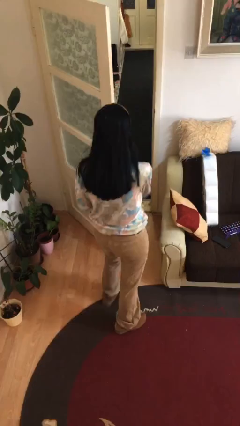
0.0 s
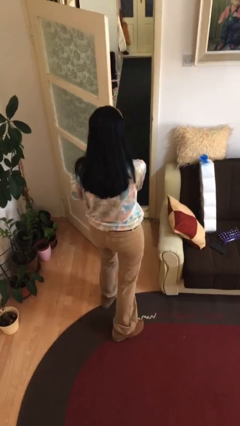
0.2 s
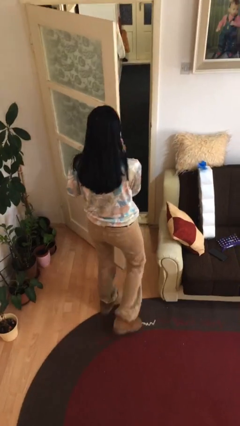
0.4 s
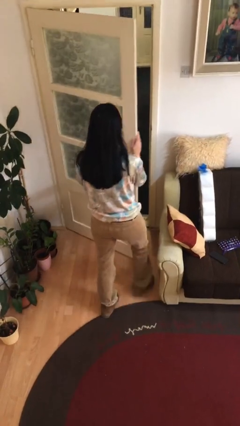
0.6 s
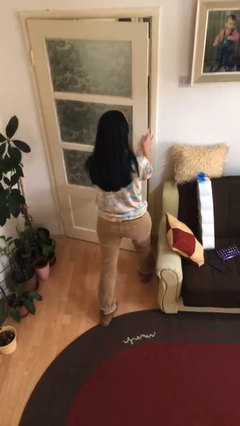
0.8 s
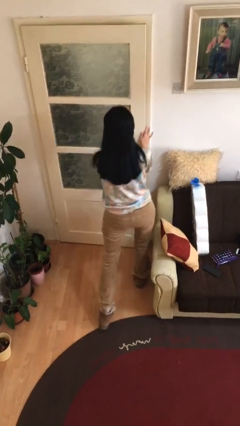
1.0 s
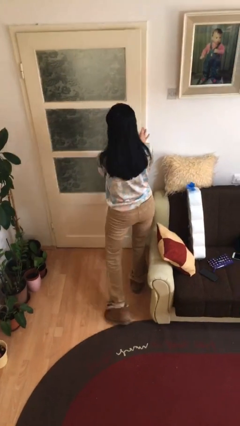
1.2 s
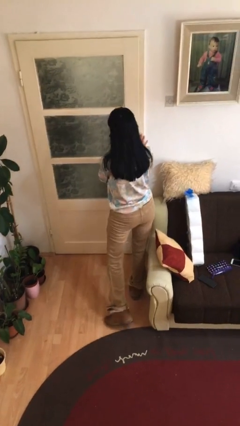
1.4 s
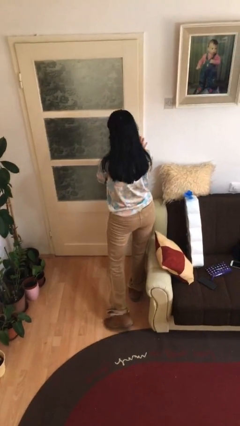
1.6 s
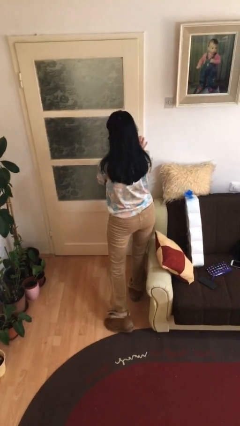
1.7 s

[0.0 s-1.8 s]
person closes facility door

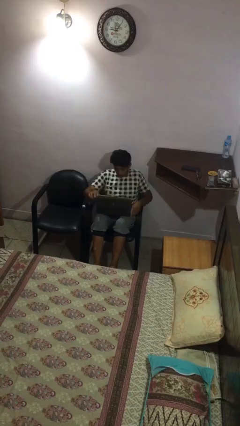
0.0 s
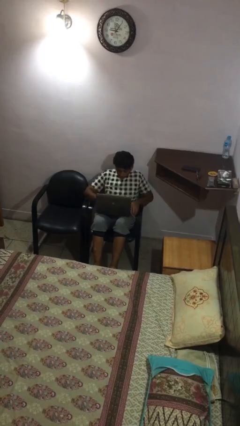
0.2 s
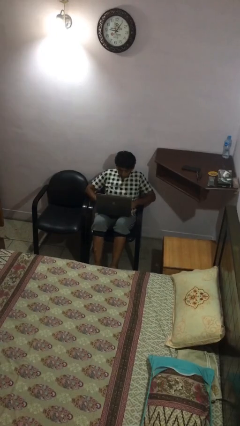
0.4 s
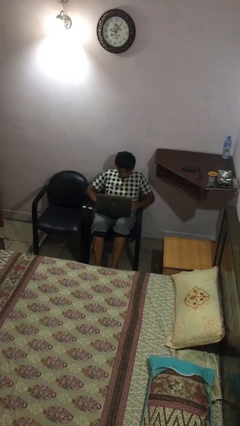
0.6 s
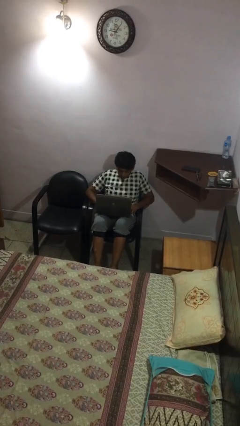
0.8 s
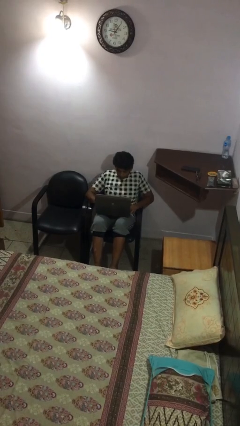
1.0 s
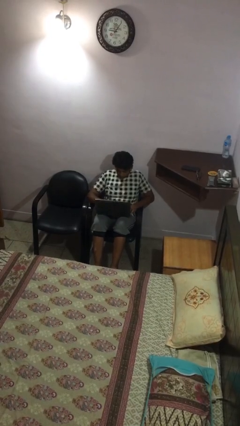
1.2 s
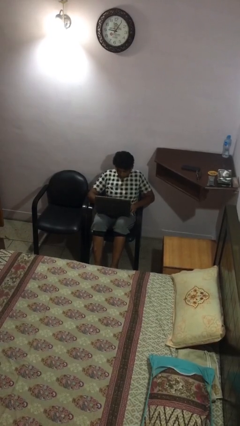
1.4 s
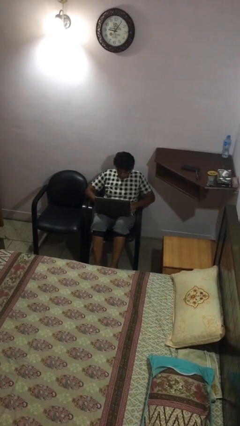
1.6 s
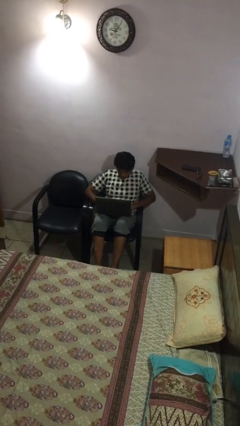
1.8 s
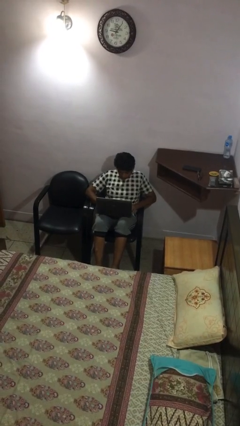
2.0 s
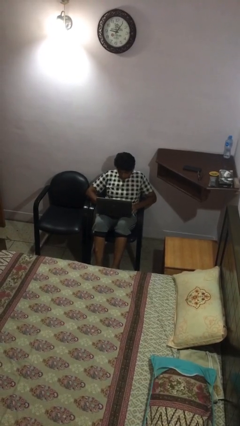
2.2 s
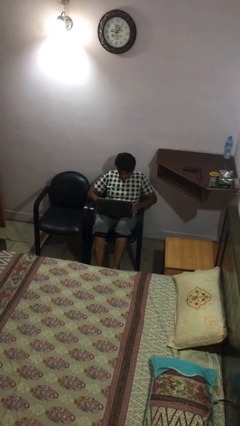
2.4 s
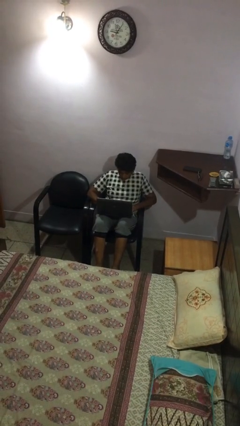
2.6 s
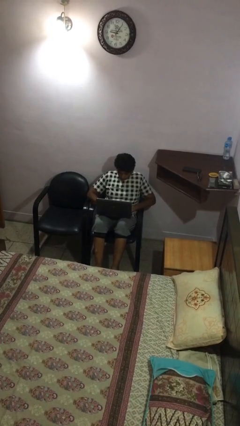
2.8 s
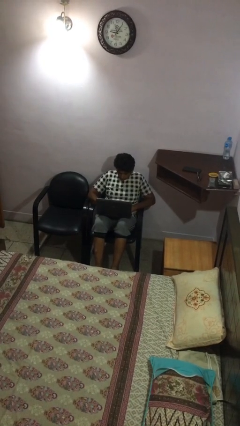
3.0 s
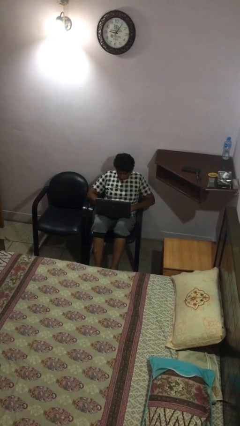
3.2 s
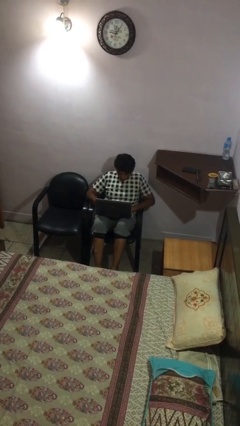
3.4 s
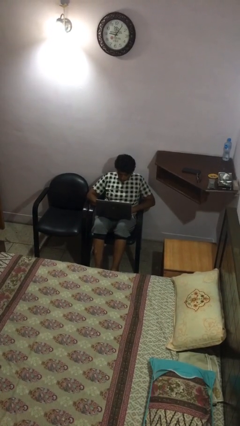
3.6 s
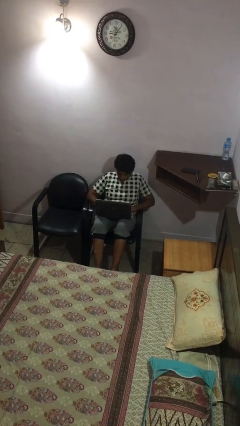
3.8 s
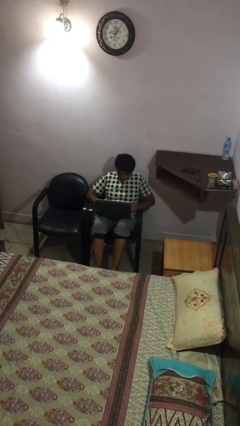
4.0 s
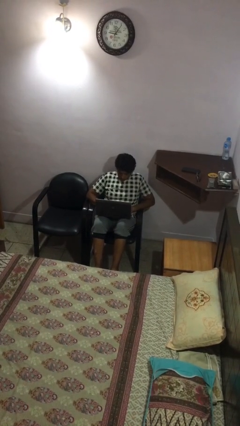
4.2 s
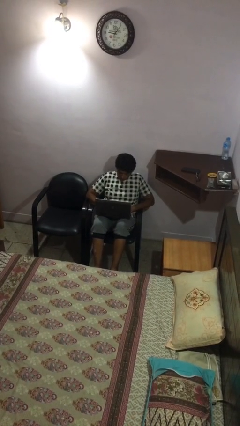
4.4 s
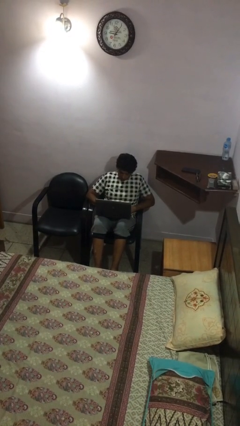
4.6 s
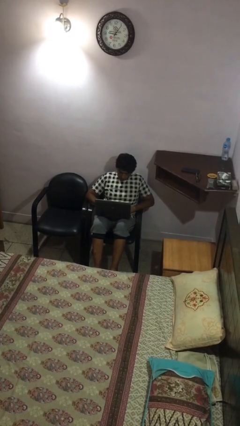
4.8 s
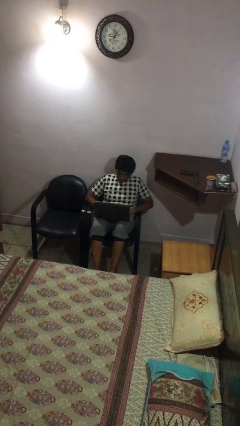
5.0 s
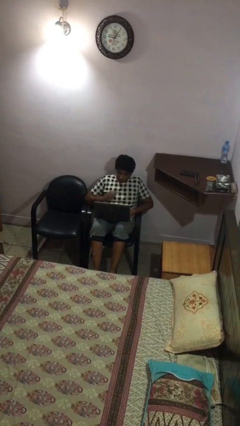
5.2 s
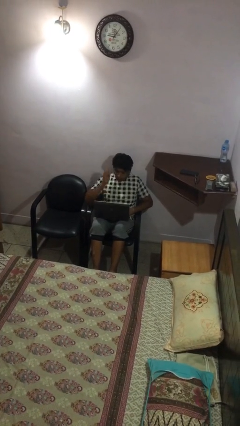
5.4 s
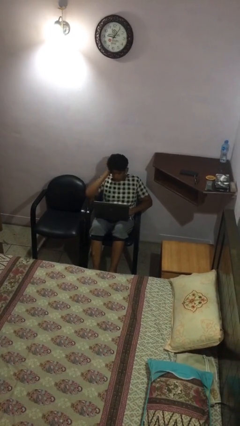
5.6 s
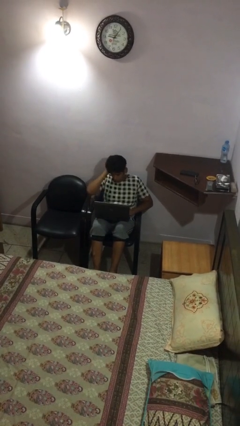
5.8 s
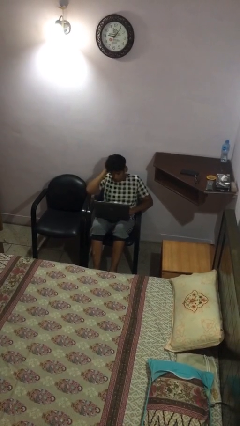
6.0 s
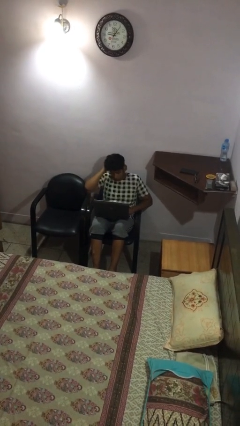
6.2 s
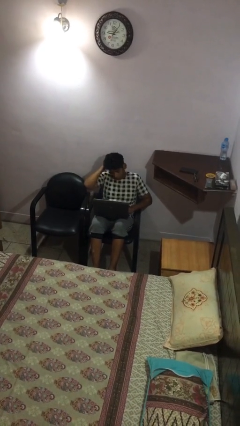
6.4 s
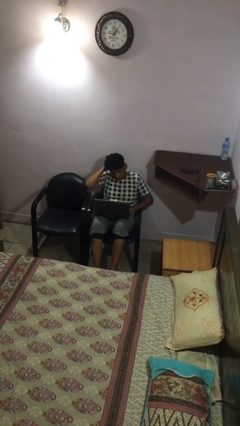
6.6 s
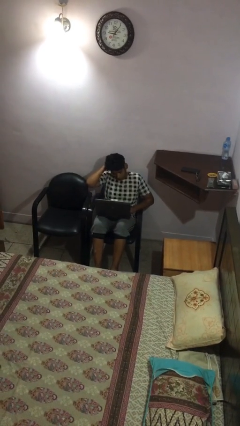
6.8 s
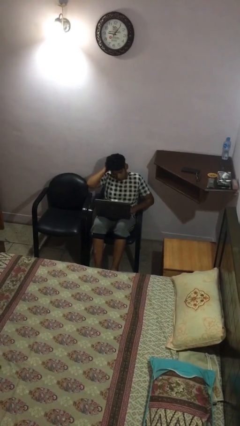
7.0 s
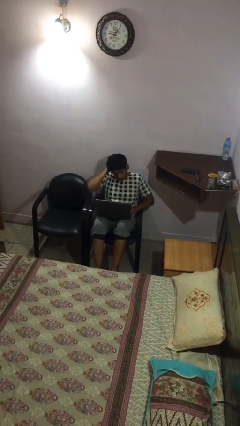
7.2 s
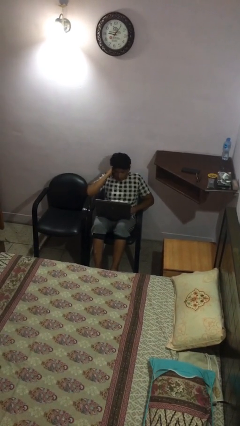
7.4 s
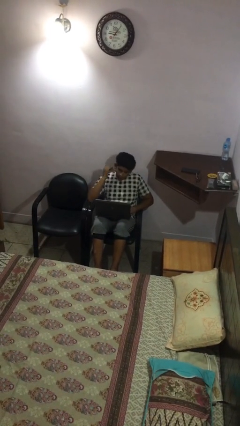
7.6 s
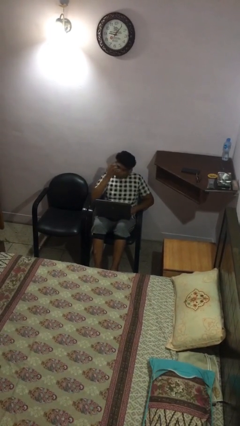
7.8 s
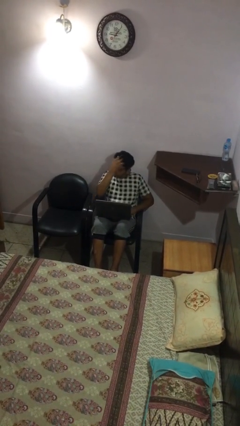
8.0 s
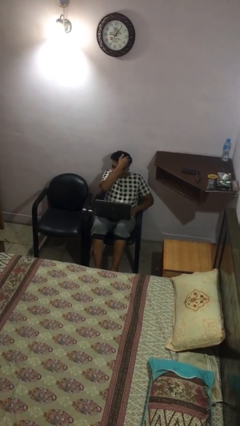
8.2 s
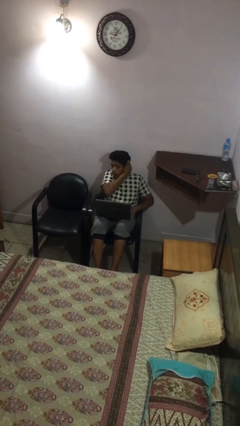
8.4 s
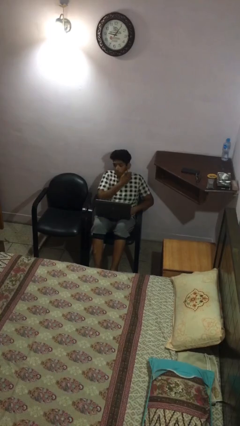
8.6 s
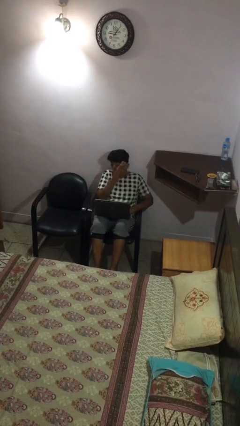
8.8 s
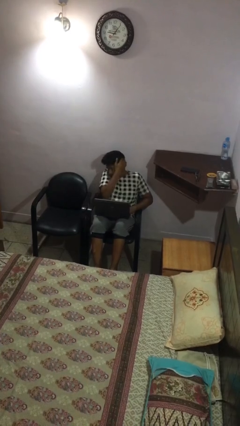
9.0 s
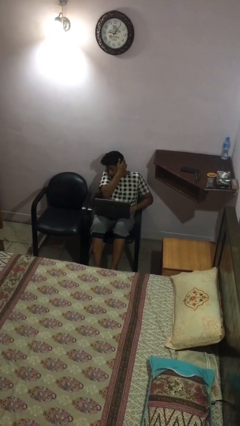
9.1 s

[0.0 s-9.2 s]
person interacts with laptop

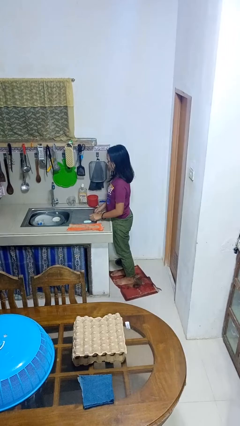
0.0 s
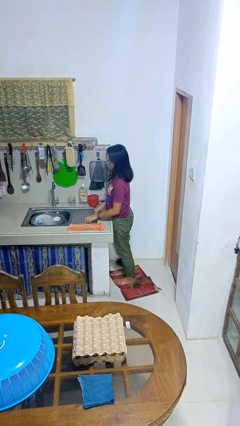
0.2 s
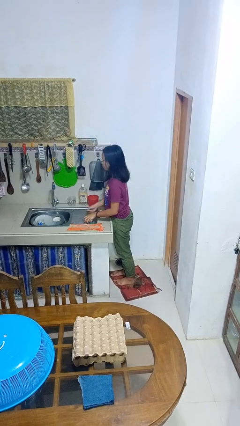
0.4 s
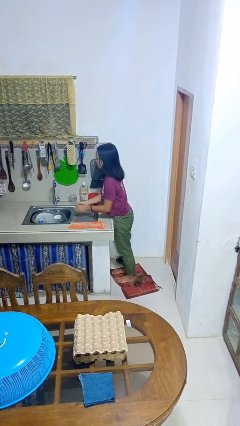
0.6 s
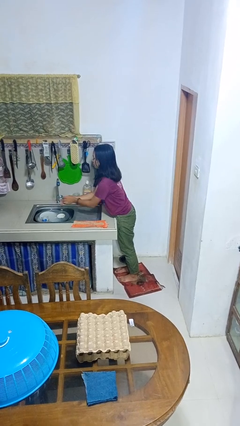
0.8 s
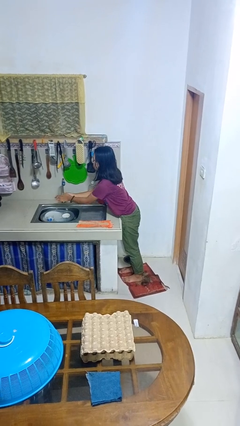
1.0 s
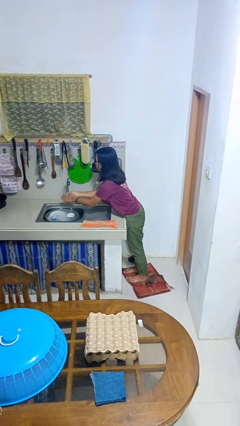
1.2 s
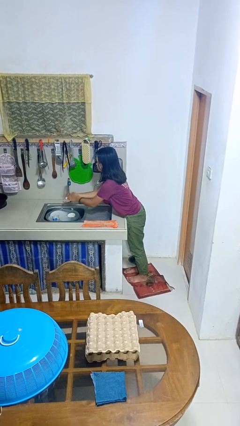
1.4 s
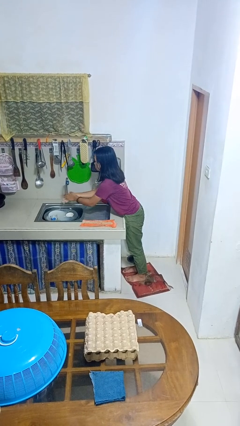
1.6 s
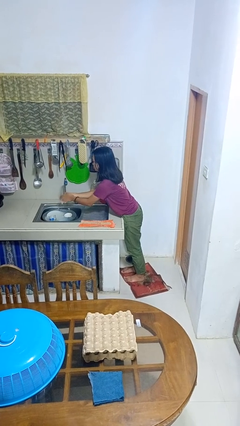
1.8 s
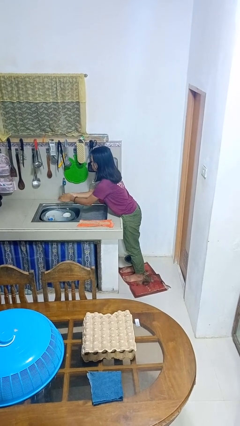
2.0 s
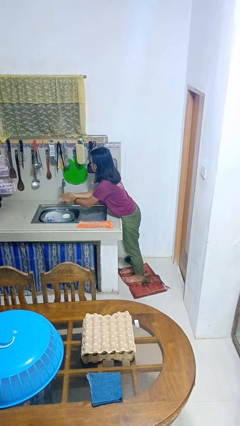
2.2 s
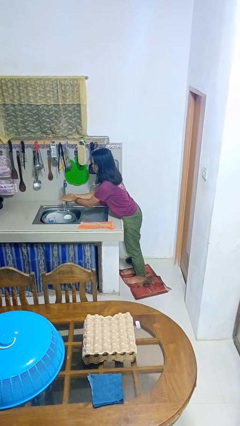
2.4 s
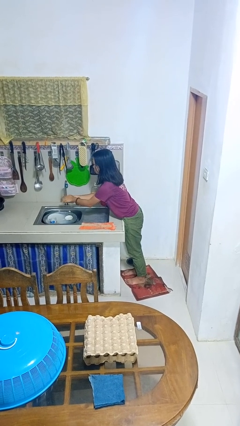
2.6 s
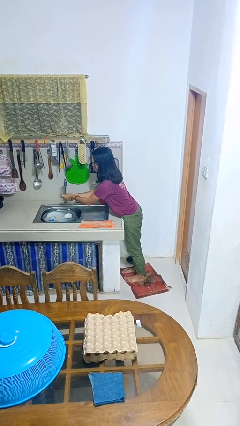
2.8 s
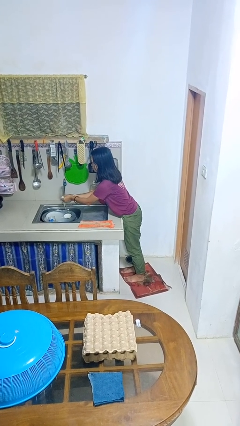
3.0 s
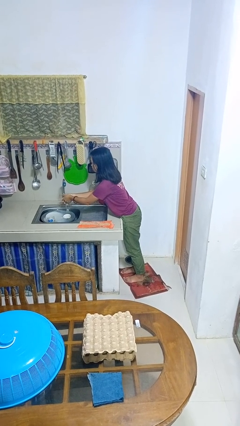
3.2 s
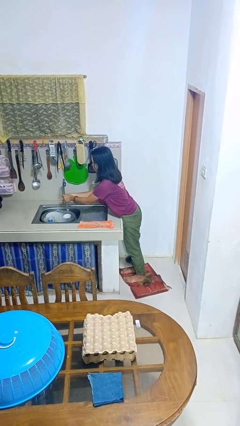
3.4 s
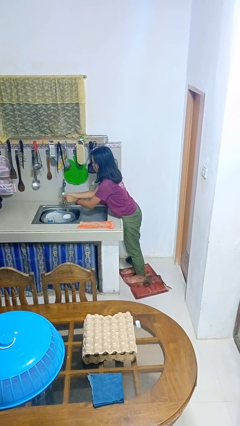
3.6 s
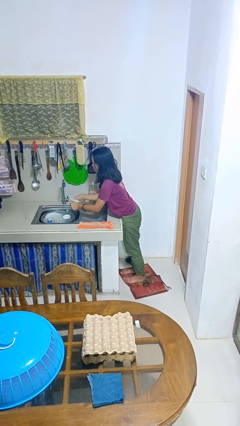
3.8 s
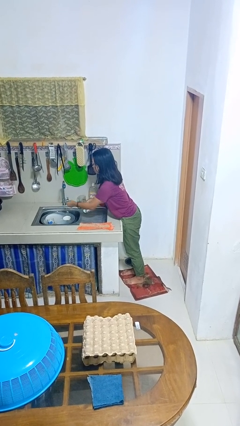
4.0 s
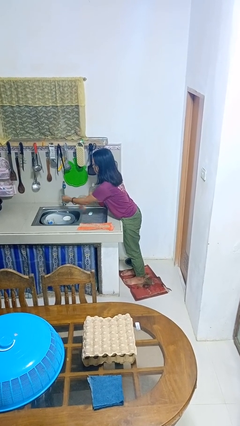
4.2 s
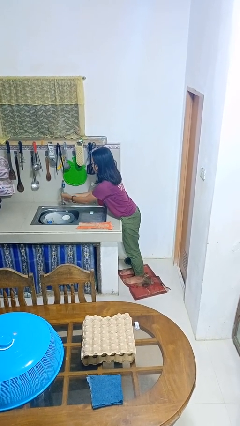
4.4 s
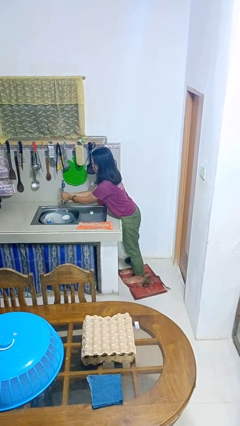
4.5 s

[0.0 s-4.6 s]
person washes hands

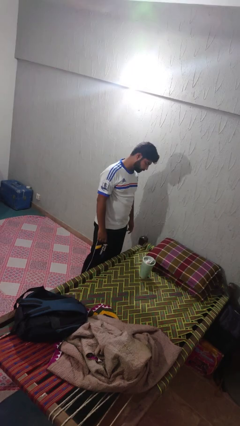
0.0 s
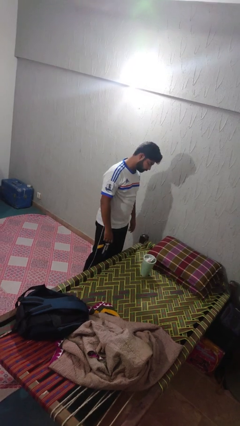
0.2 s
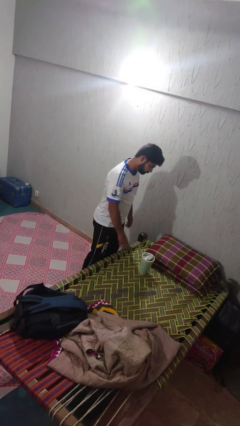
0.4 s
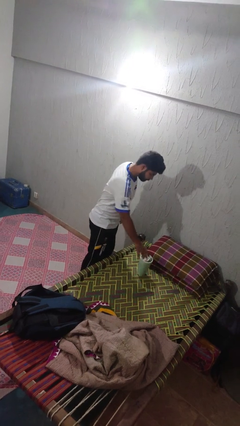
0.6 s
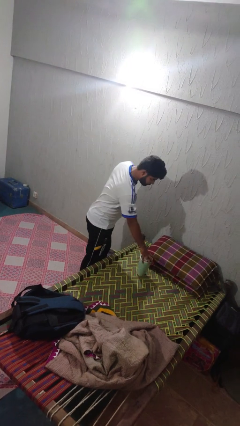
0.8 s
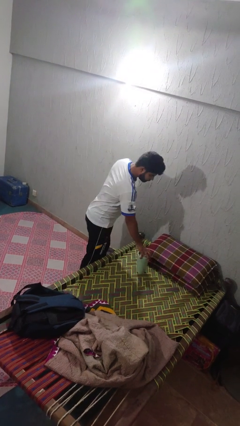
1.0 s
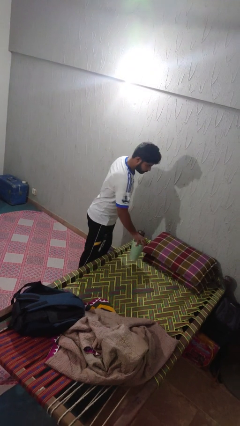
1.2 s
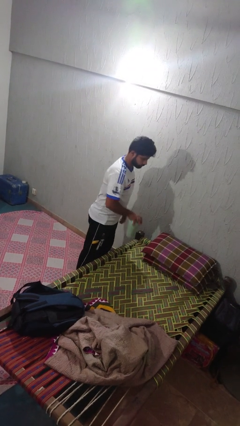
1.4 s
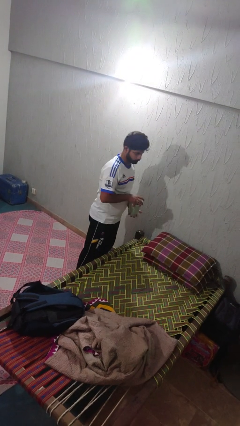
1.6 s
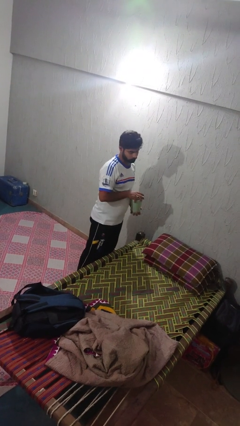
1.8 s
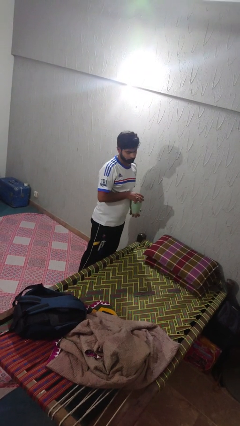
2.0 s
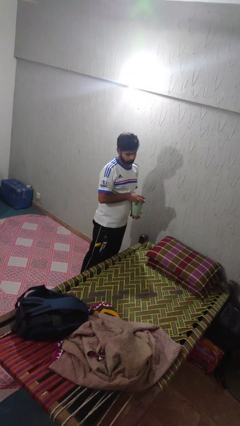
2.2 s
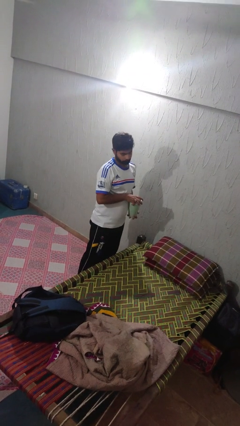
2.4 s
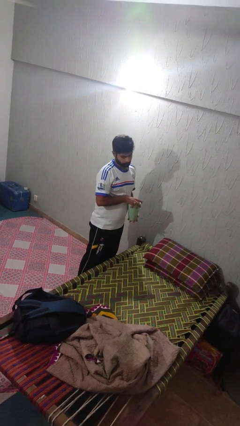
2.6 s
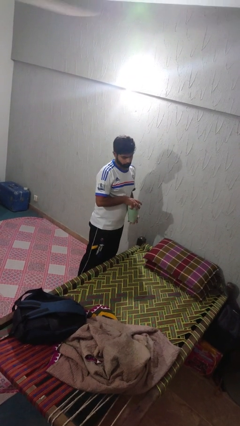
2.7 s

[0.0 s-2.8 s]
person picks up object from bed
